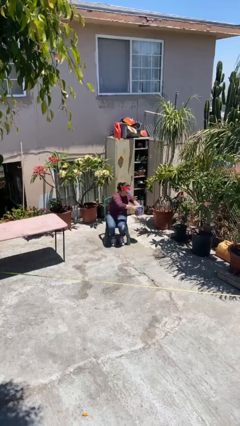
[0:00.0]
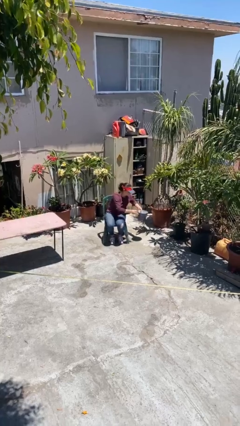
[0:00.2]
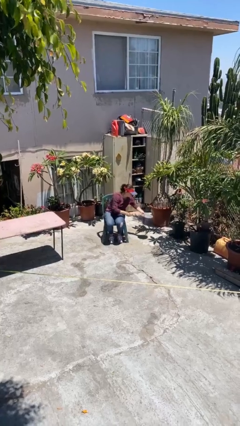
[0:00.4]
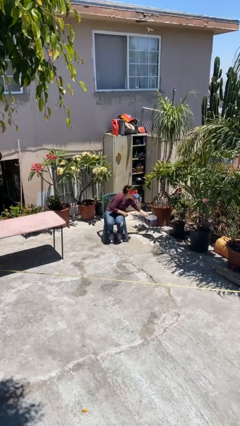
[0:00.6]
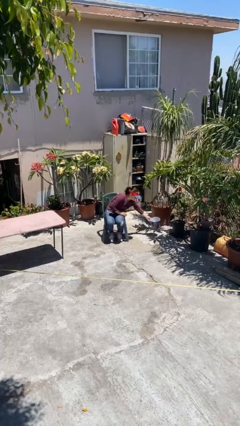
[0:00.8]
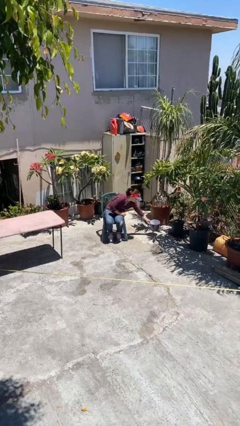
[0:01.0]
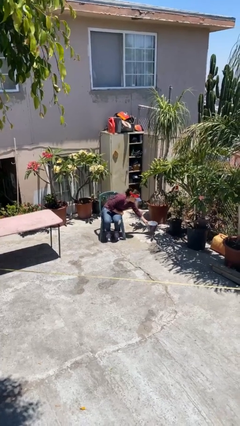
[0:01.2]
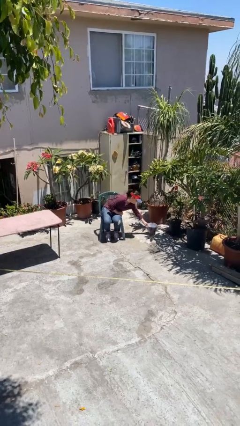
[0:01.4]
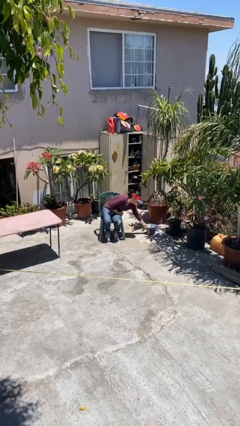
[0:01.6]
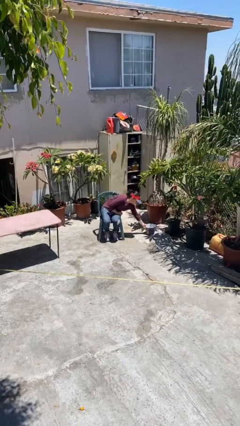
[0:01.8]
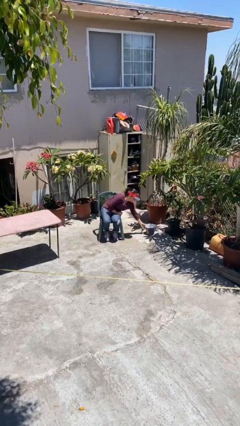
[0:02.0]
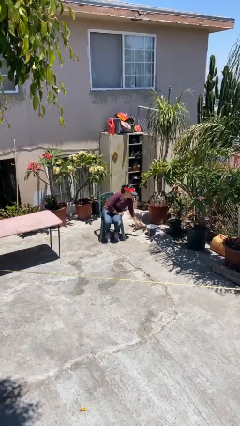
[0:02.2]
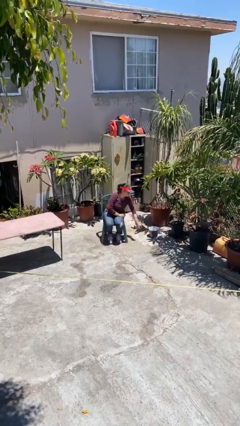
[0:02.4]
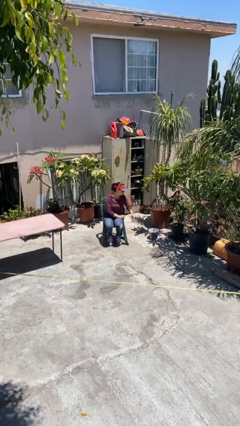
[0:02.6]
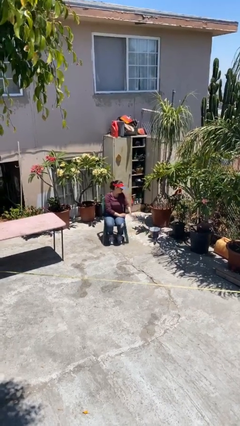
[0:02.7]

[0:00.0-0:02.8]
person puts down object on floor

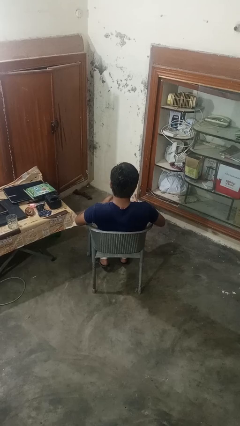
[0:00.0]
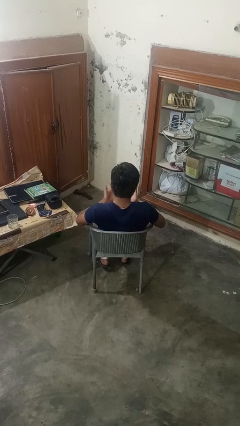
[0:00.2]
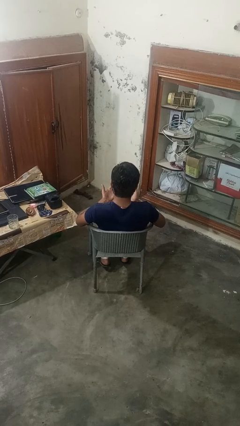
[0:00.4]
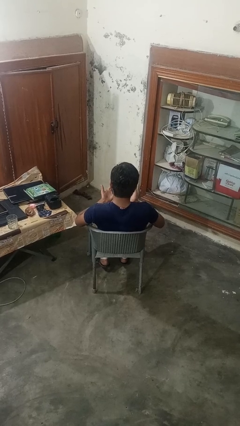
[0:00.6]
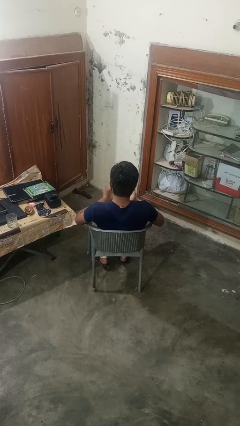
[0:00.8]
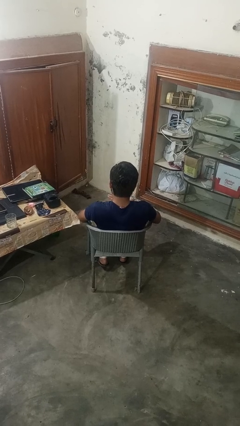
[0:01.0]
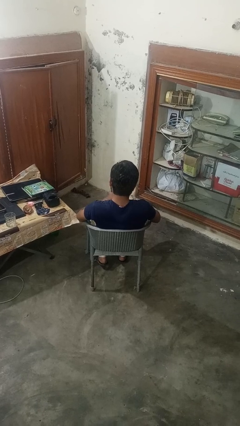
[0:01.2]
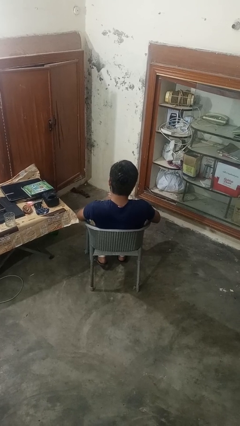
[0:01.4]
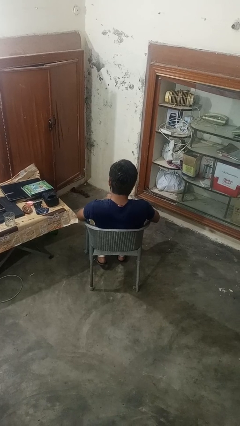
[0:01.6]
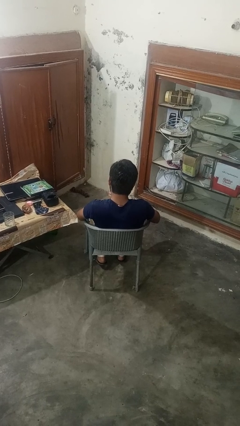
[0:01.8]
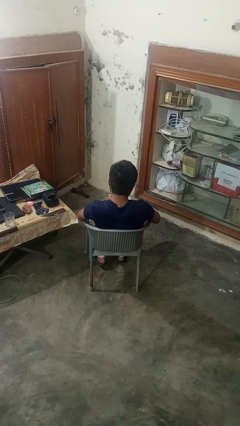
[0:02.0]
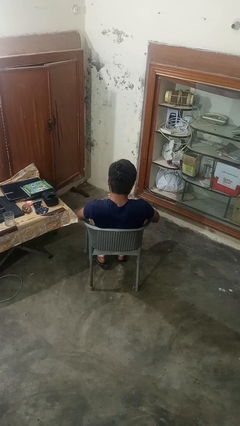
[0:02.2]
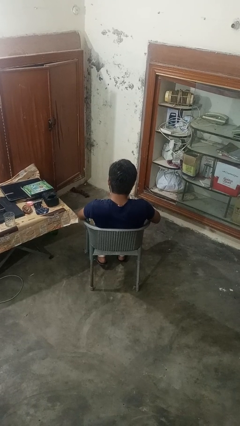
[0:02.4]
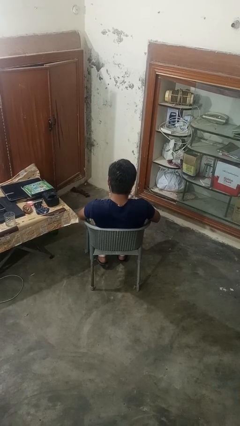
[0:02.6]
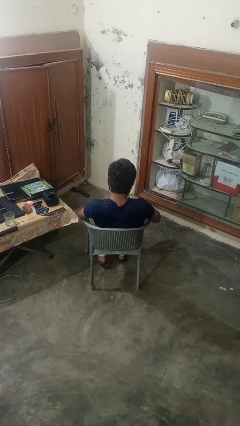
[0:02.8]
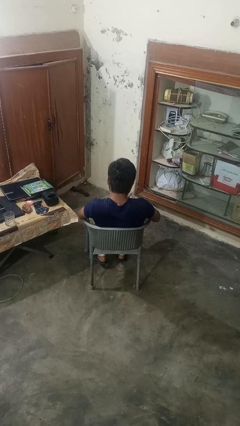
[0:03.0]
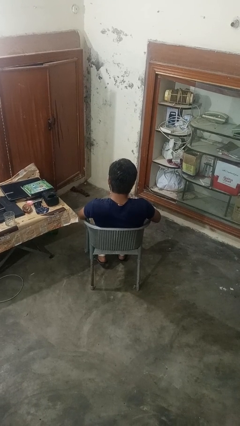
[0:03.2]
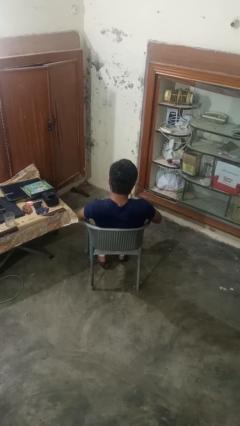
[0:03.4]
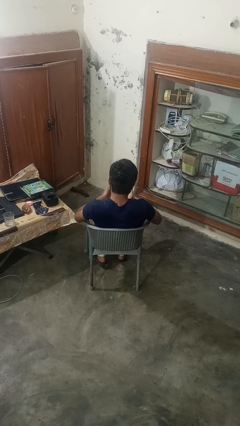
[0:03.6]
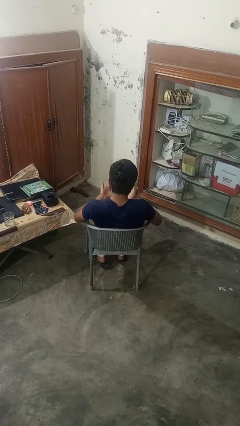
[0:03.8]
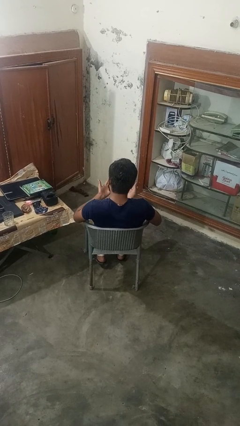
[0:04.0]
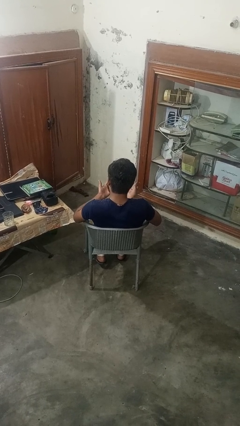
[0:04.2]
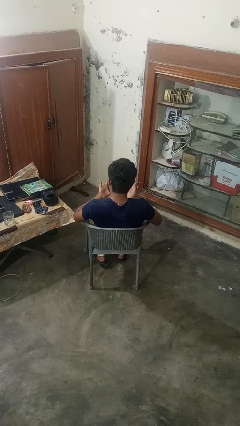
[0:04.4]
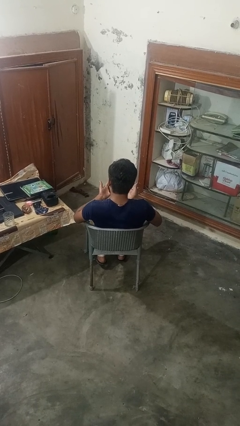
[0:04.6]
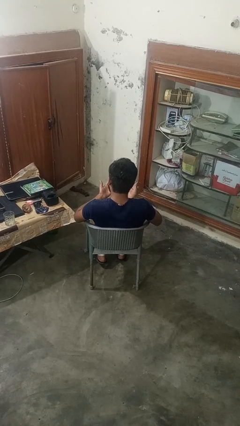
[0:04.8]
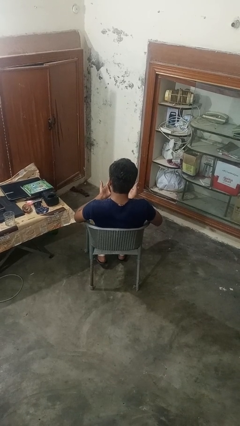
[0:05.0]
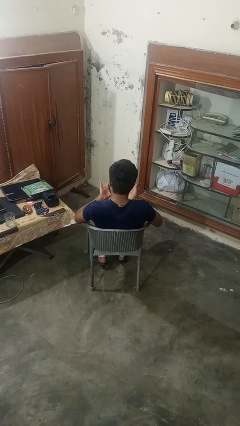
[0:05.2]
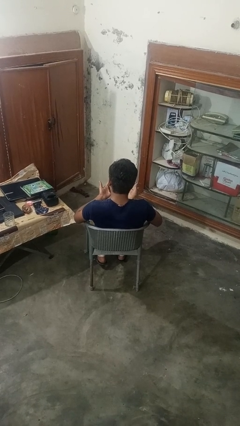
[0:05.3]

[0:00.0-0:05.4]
person looks at hands in lap

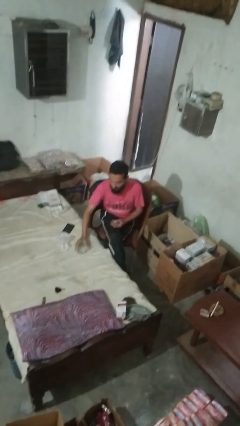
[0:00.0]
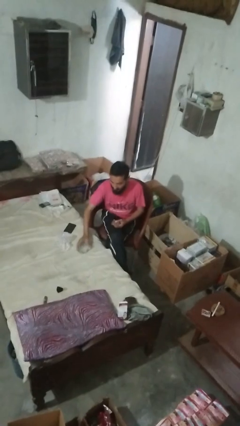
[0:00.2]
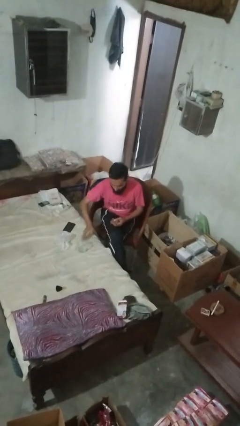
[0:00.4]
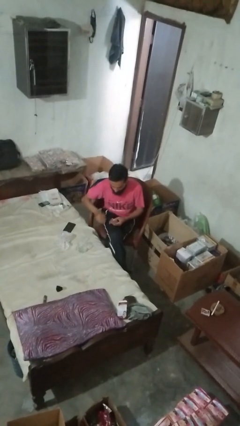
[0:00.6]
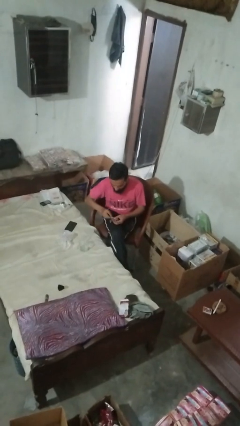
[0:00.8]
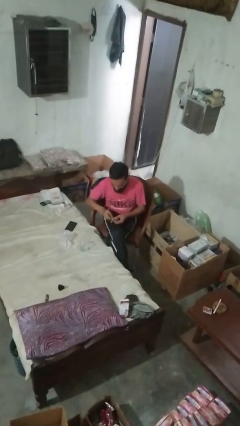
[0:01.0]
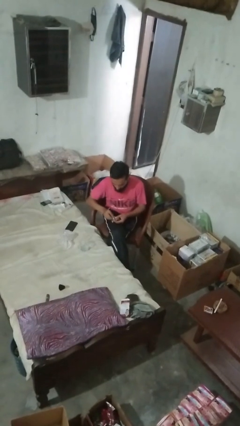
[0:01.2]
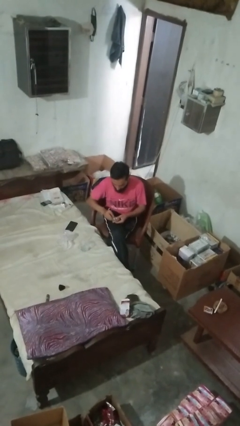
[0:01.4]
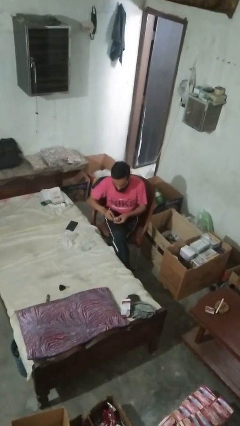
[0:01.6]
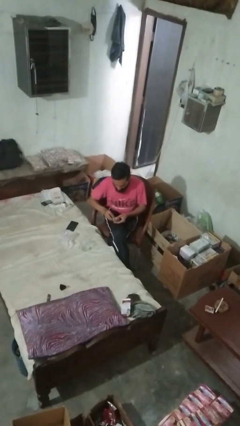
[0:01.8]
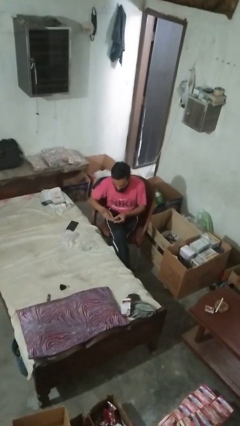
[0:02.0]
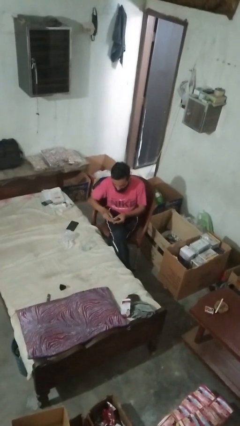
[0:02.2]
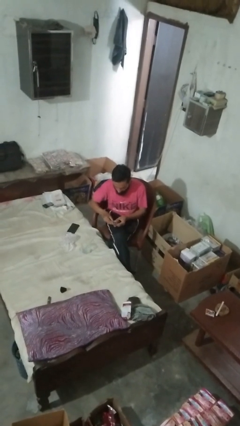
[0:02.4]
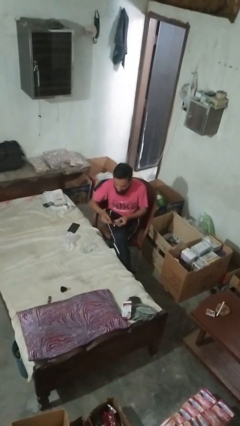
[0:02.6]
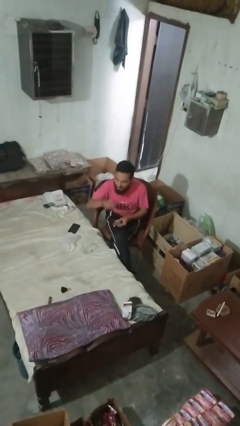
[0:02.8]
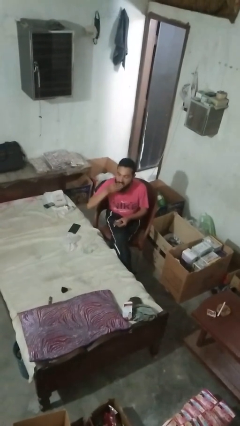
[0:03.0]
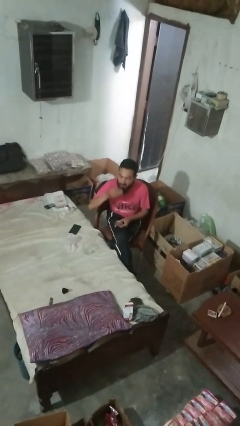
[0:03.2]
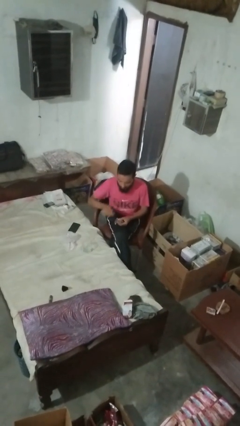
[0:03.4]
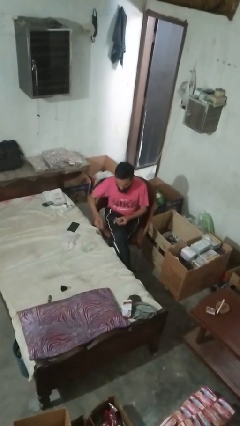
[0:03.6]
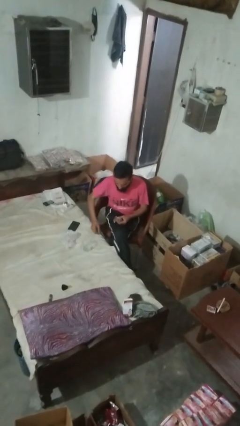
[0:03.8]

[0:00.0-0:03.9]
person takes medicine pills

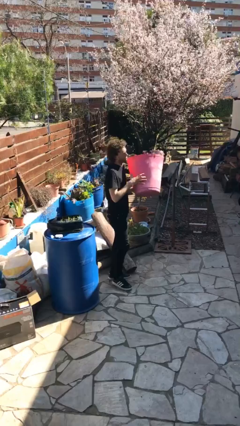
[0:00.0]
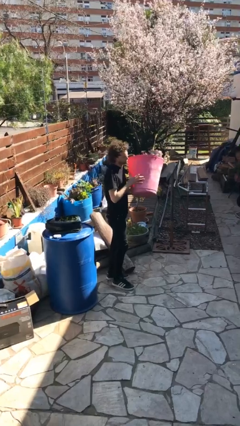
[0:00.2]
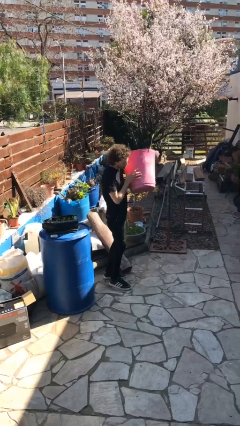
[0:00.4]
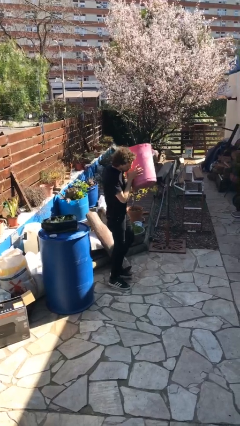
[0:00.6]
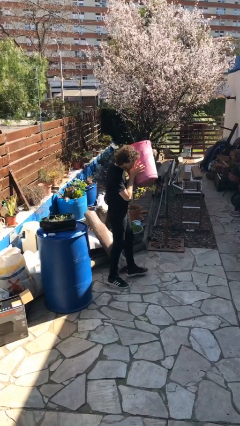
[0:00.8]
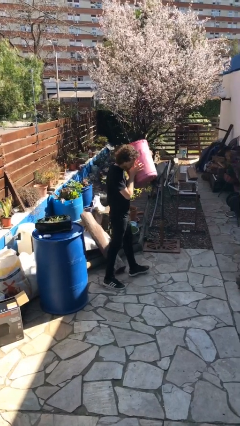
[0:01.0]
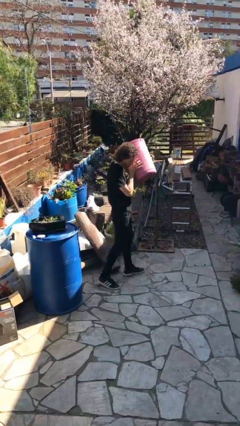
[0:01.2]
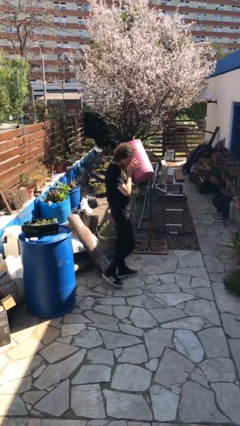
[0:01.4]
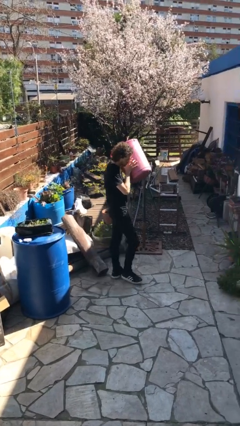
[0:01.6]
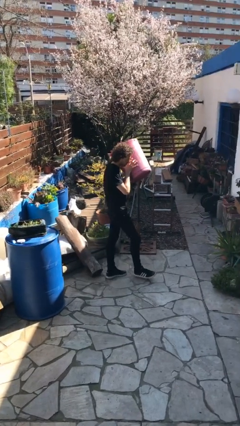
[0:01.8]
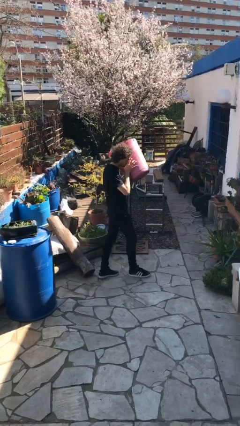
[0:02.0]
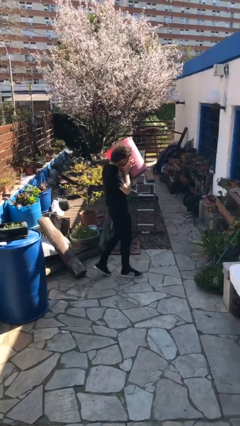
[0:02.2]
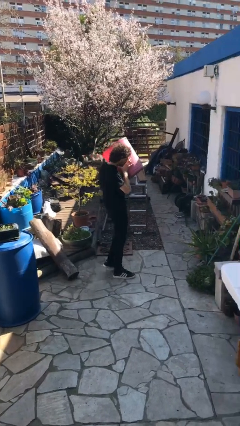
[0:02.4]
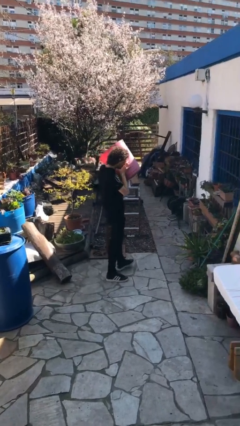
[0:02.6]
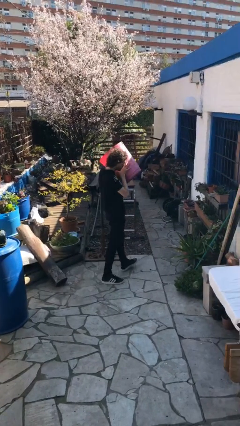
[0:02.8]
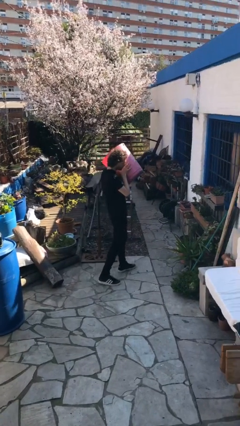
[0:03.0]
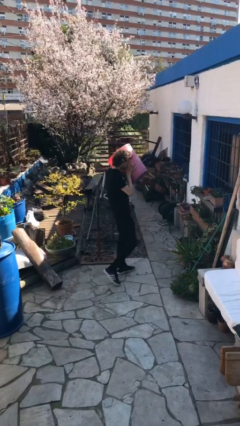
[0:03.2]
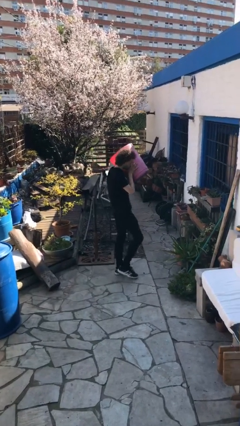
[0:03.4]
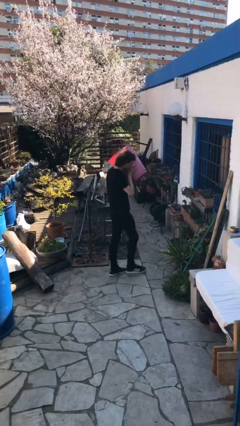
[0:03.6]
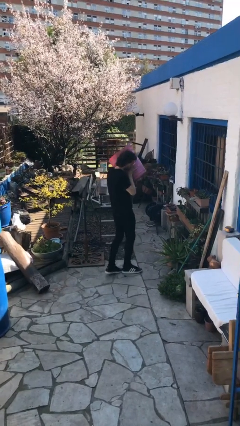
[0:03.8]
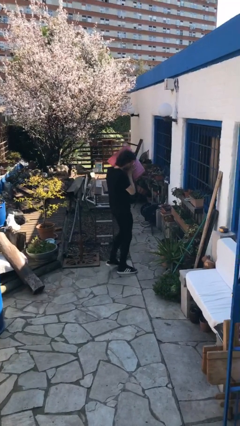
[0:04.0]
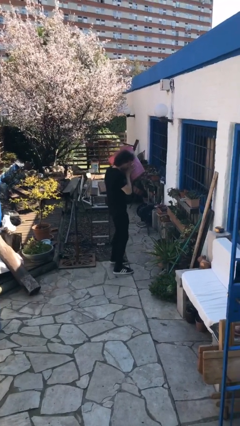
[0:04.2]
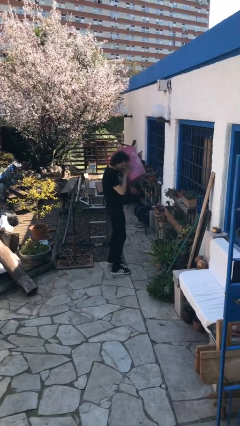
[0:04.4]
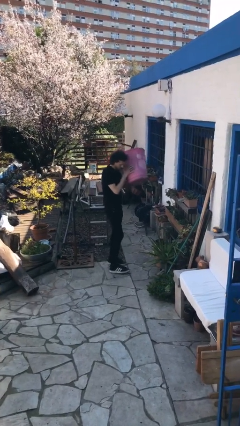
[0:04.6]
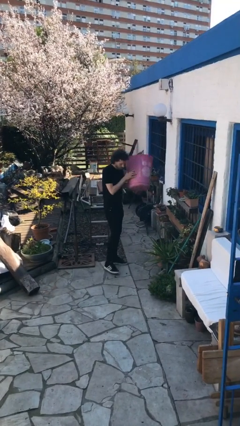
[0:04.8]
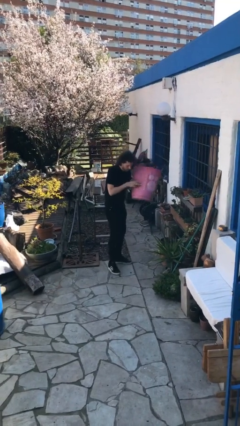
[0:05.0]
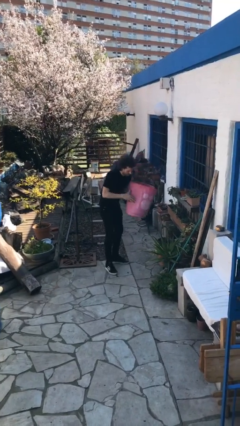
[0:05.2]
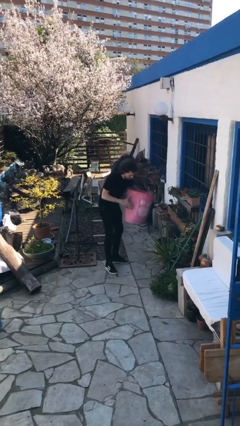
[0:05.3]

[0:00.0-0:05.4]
person carries heavy object
